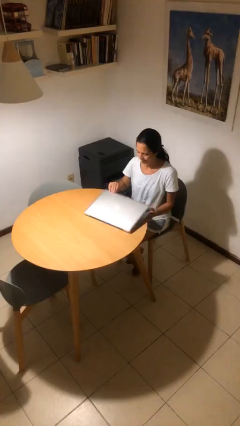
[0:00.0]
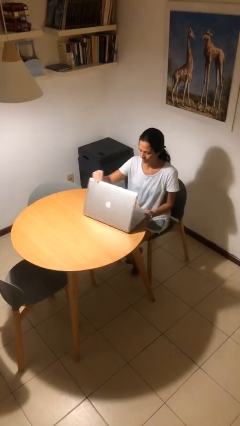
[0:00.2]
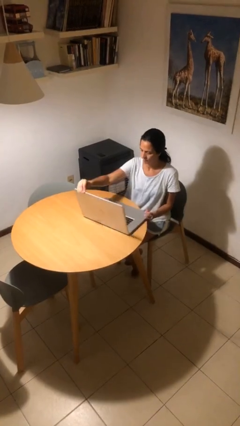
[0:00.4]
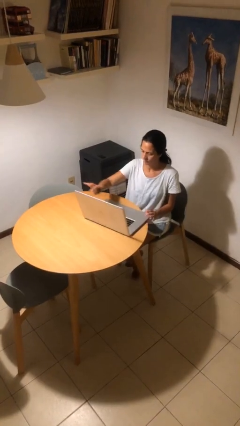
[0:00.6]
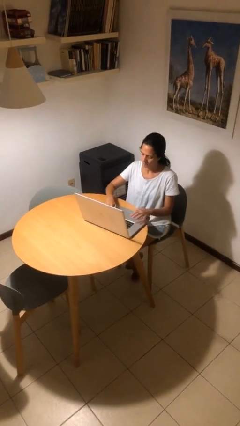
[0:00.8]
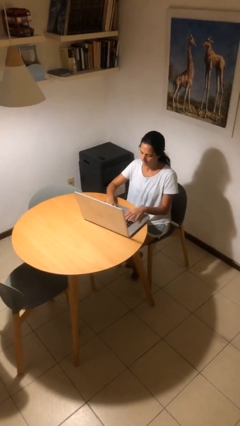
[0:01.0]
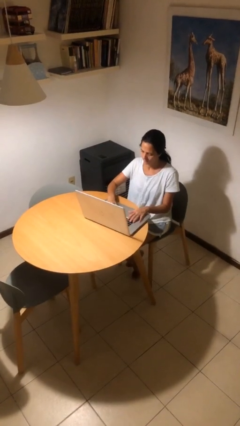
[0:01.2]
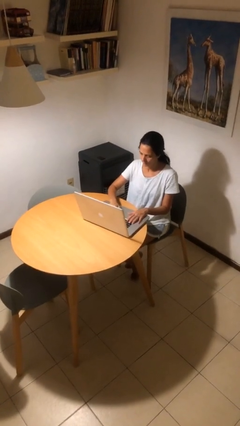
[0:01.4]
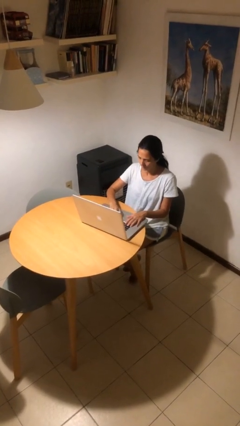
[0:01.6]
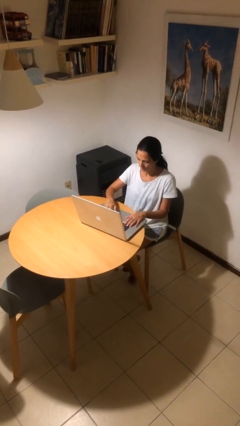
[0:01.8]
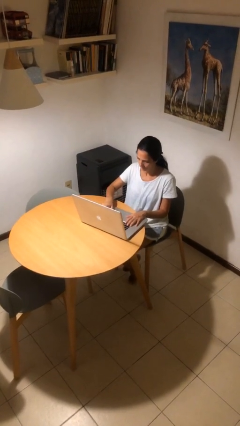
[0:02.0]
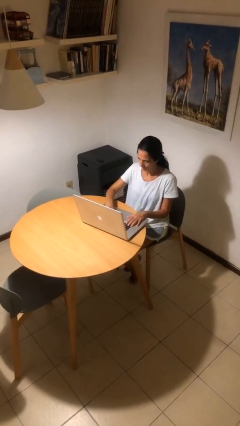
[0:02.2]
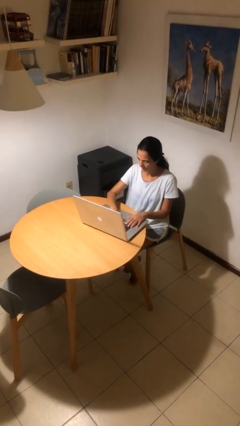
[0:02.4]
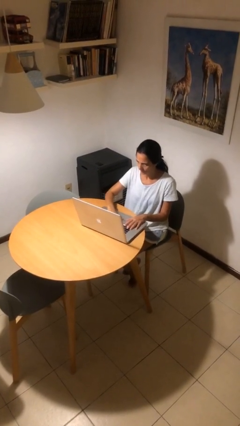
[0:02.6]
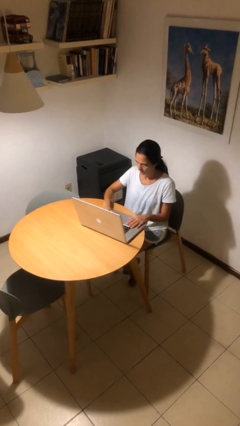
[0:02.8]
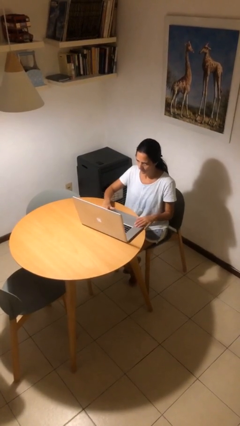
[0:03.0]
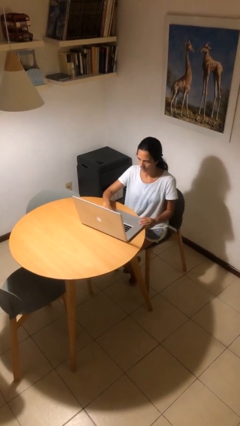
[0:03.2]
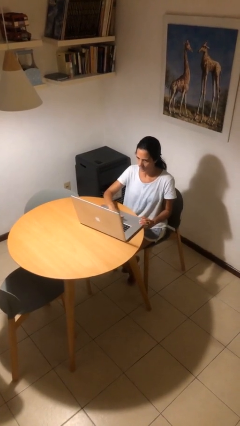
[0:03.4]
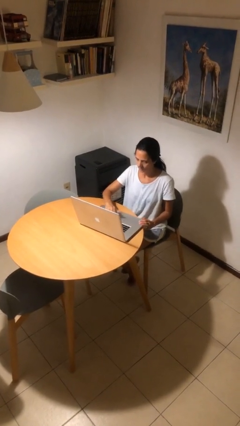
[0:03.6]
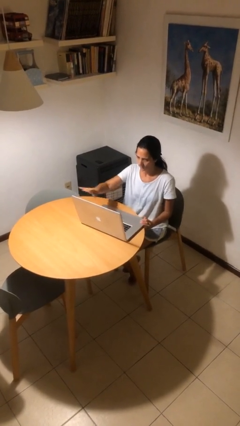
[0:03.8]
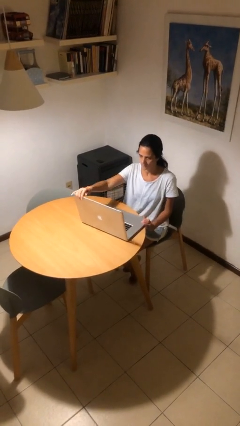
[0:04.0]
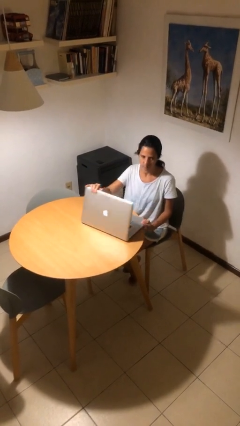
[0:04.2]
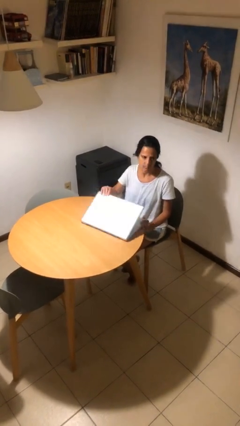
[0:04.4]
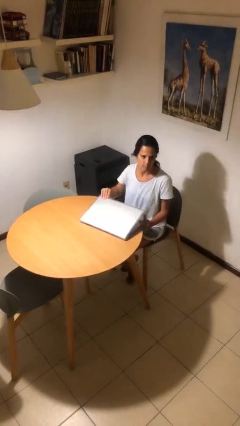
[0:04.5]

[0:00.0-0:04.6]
person interacts with laptop

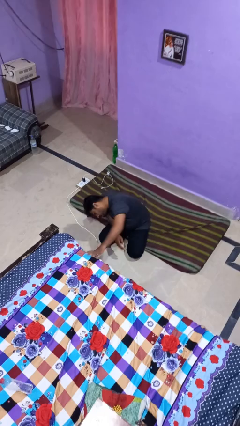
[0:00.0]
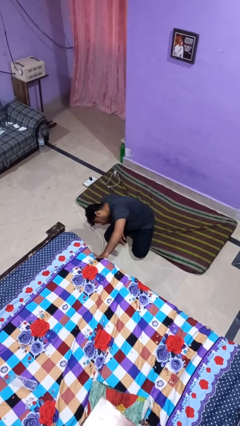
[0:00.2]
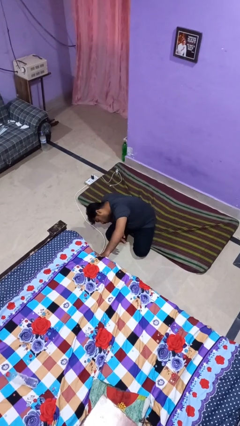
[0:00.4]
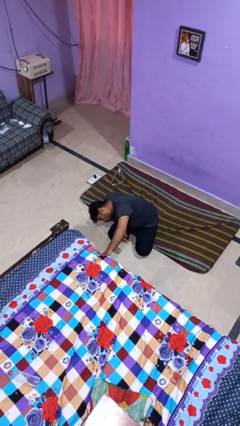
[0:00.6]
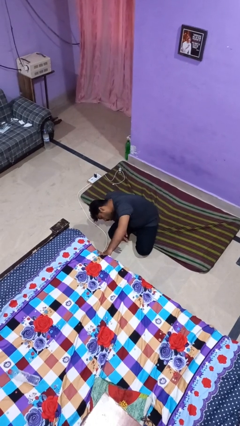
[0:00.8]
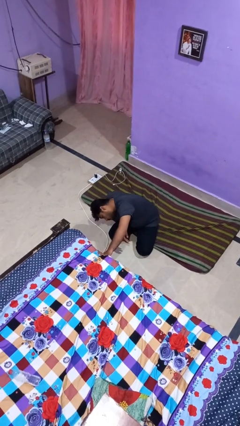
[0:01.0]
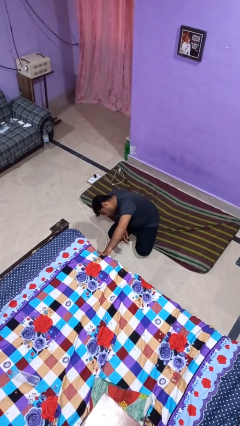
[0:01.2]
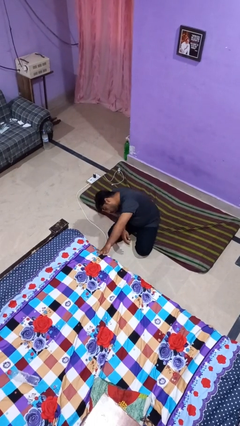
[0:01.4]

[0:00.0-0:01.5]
person searches under bed

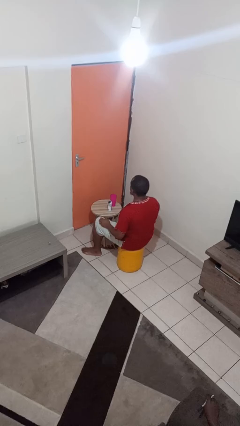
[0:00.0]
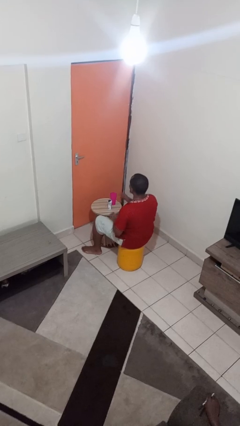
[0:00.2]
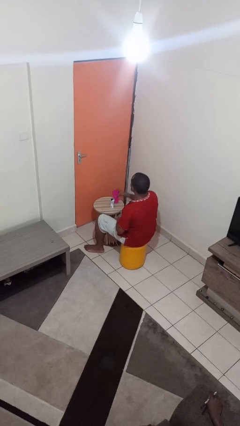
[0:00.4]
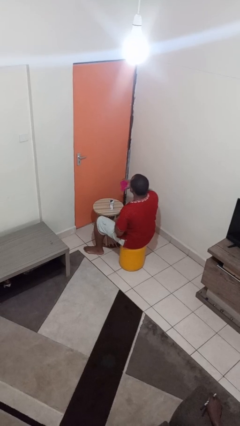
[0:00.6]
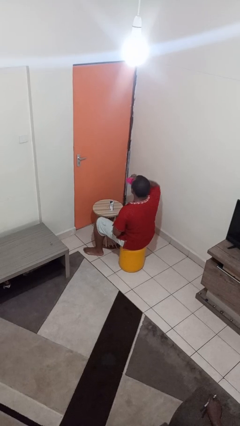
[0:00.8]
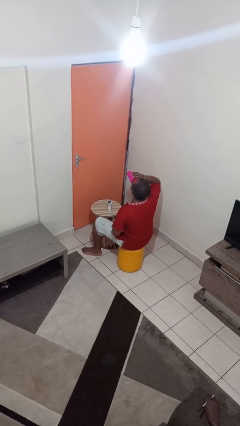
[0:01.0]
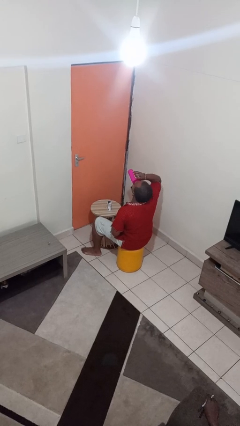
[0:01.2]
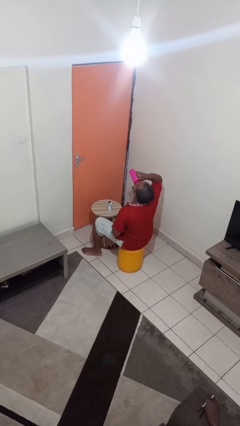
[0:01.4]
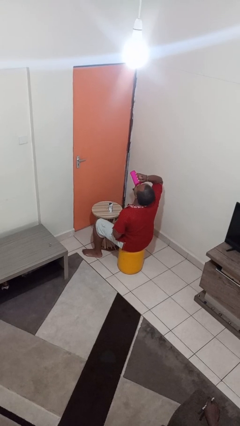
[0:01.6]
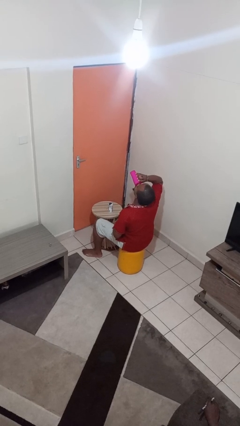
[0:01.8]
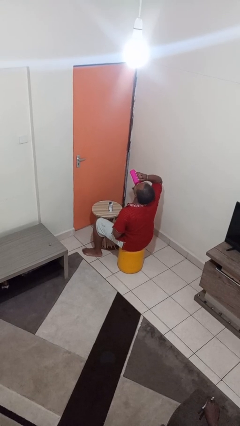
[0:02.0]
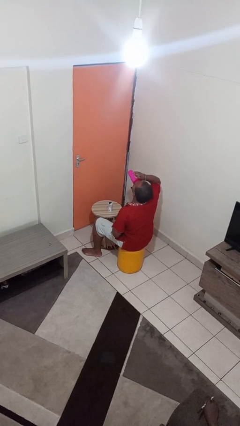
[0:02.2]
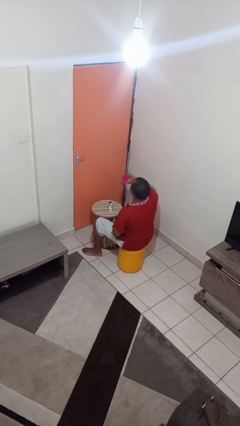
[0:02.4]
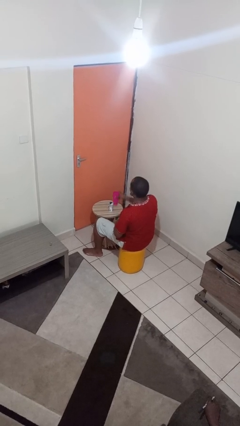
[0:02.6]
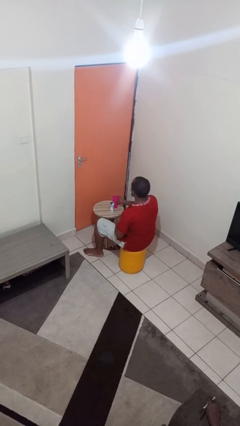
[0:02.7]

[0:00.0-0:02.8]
person drinks from cup

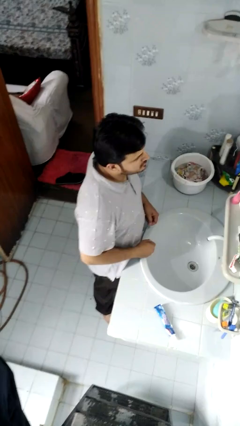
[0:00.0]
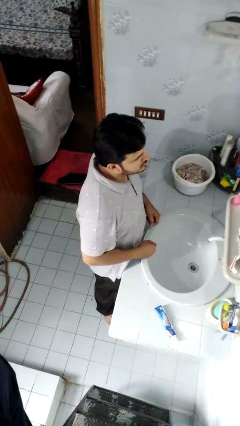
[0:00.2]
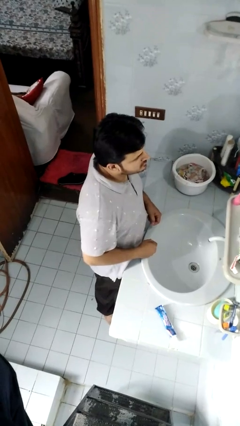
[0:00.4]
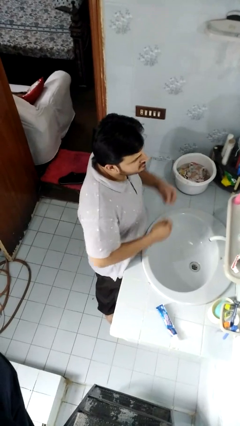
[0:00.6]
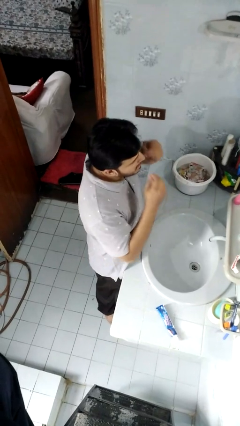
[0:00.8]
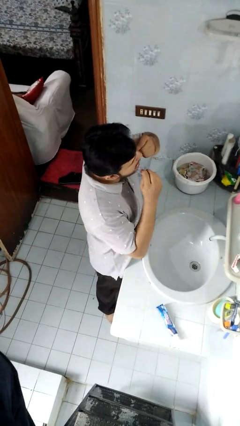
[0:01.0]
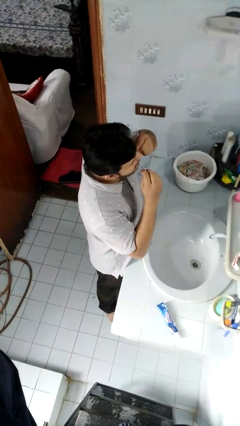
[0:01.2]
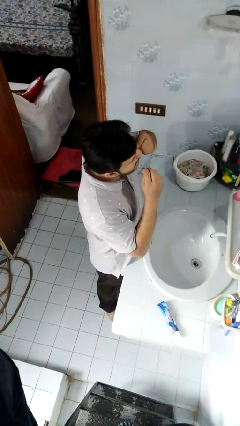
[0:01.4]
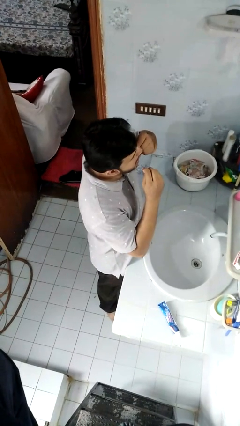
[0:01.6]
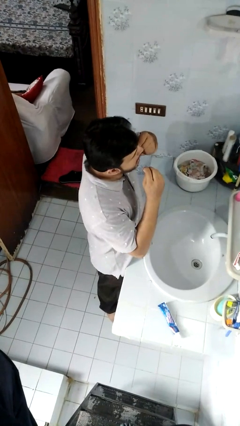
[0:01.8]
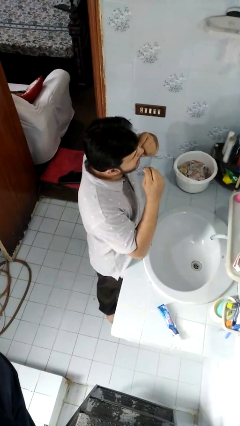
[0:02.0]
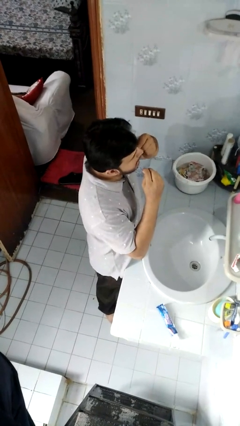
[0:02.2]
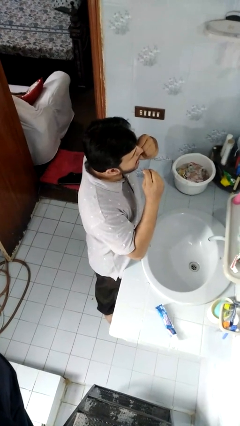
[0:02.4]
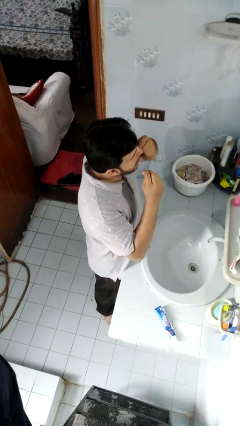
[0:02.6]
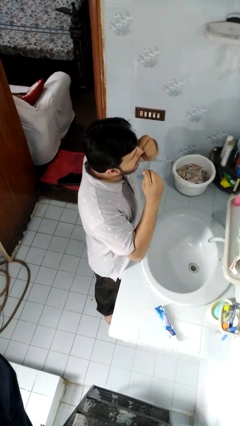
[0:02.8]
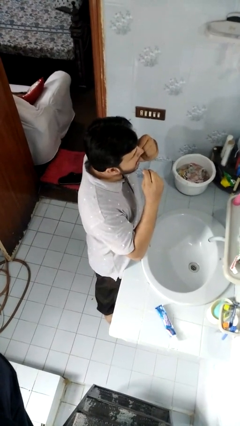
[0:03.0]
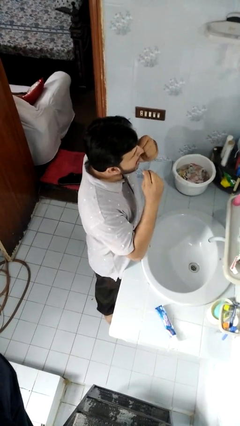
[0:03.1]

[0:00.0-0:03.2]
person flosses

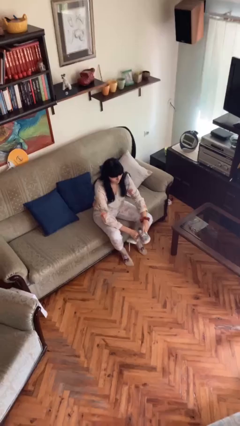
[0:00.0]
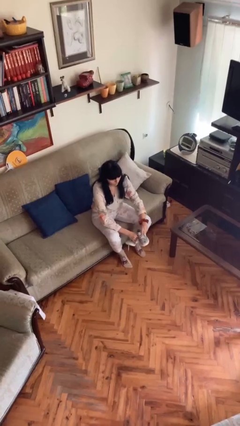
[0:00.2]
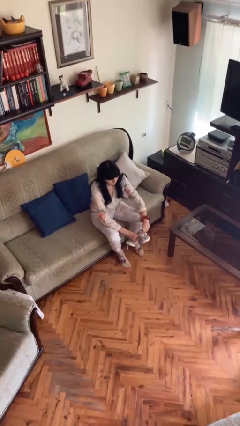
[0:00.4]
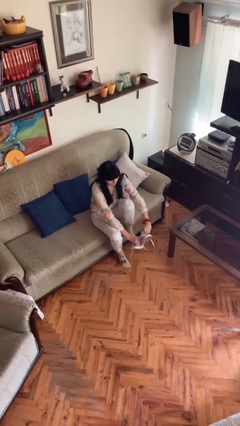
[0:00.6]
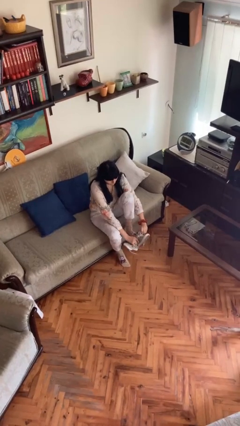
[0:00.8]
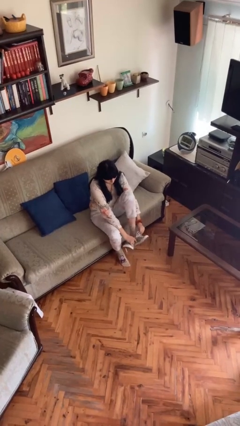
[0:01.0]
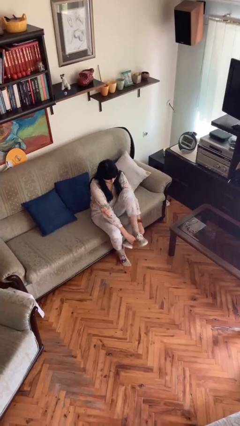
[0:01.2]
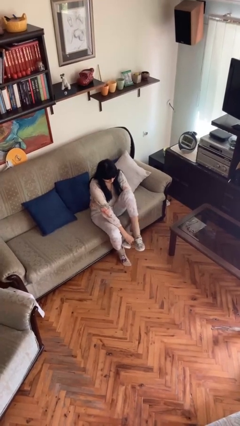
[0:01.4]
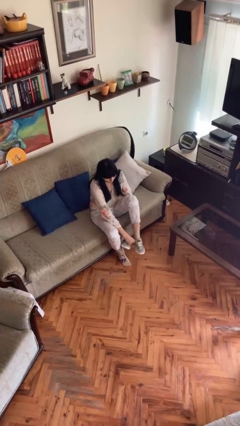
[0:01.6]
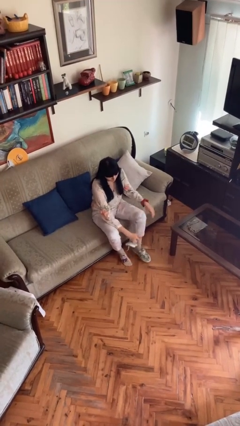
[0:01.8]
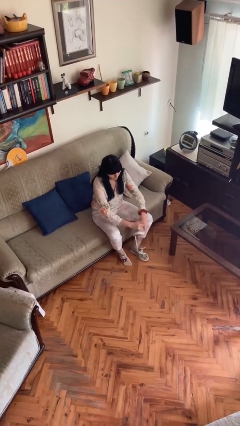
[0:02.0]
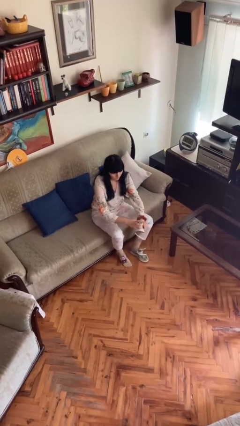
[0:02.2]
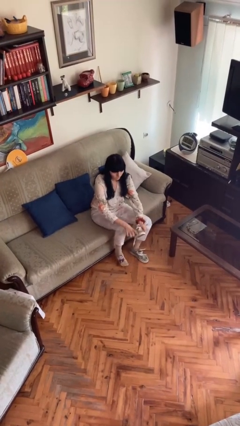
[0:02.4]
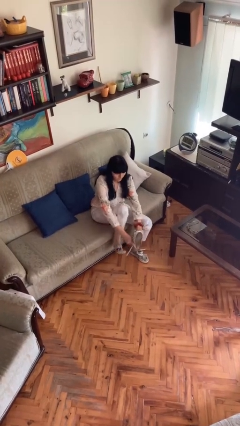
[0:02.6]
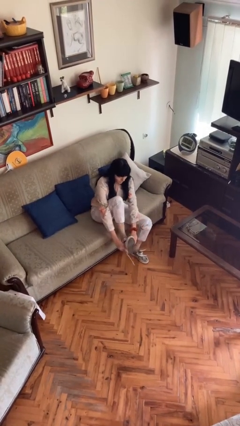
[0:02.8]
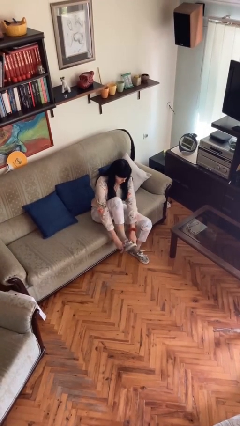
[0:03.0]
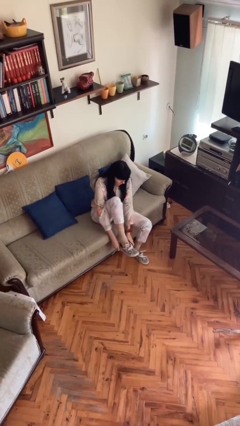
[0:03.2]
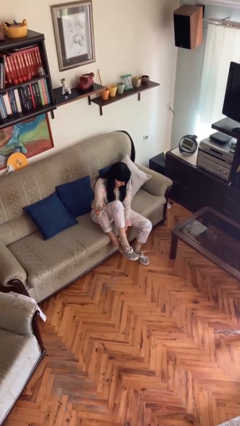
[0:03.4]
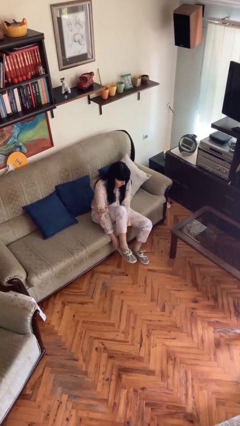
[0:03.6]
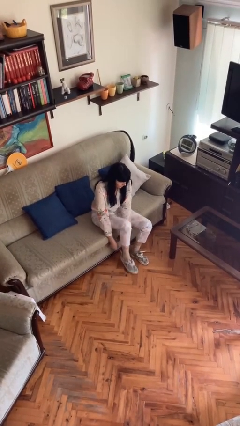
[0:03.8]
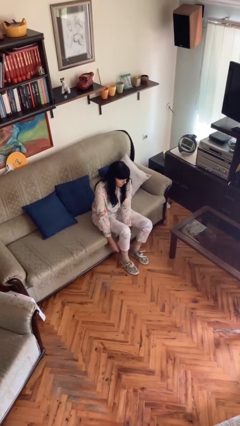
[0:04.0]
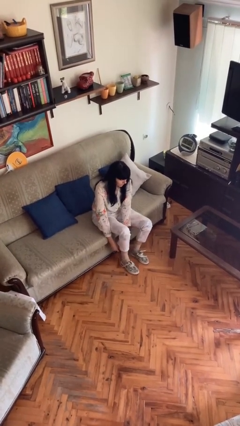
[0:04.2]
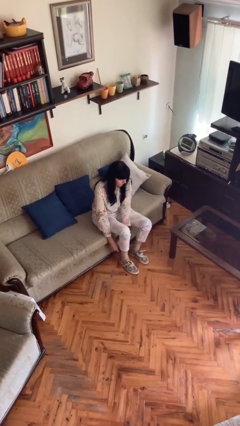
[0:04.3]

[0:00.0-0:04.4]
person puts on shoes

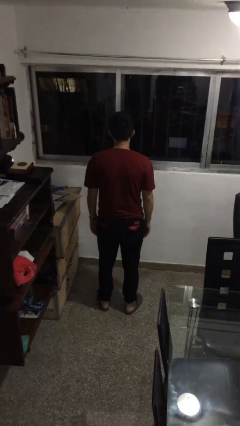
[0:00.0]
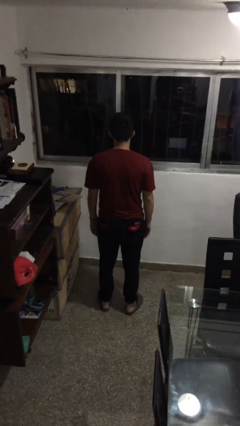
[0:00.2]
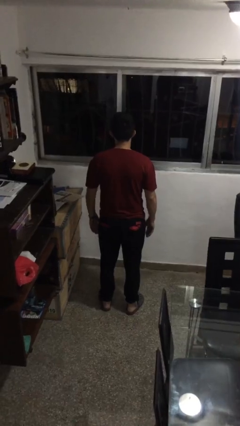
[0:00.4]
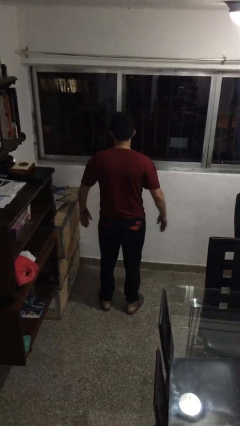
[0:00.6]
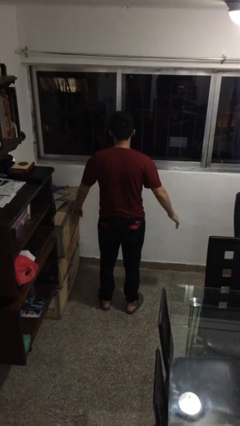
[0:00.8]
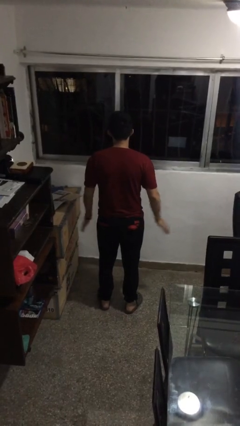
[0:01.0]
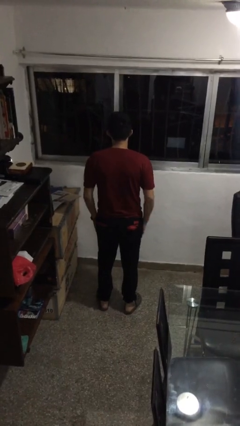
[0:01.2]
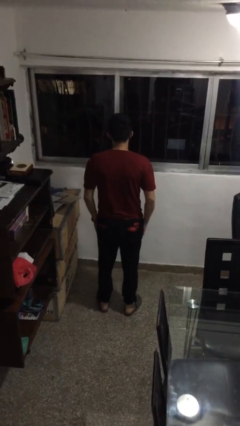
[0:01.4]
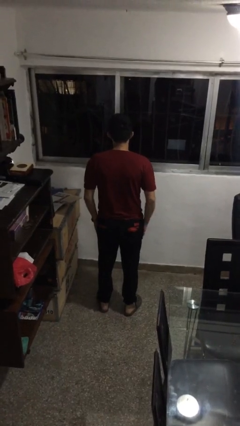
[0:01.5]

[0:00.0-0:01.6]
person slaps hands on thighs
